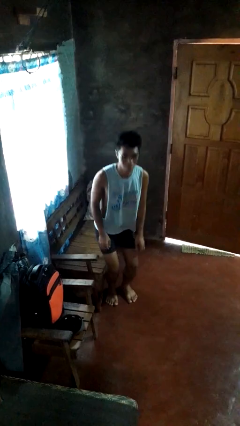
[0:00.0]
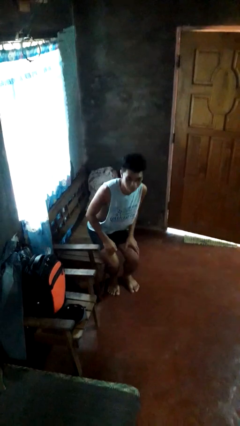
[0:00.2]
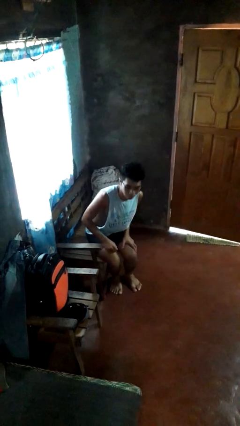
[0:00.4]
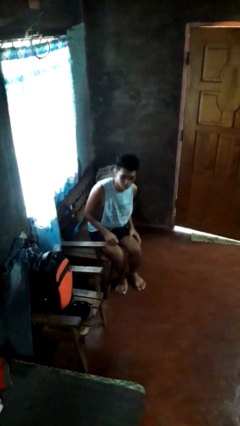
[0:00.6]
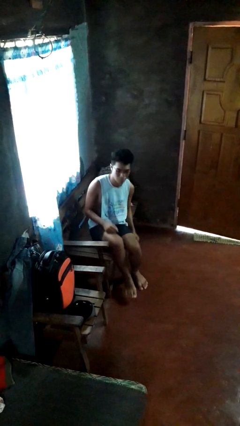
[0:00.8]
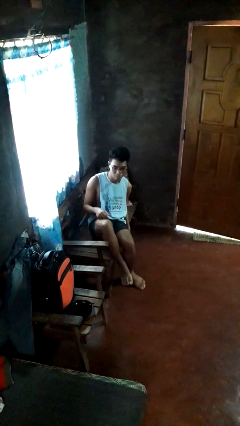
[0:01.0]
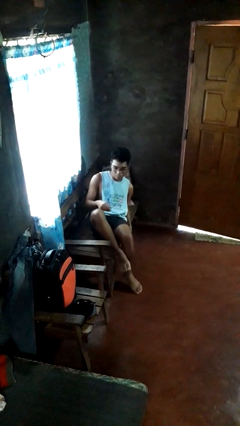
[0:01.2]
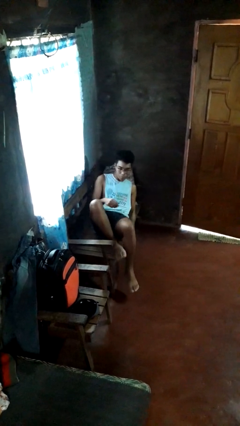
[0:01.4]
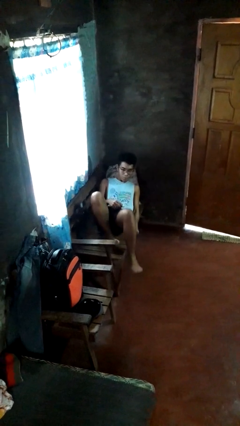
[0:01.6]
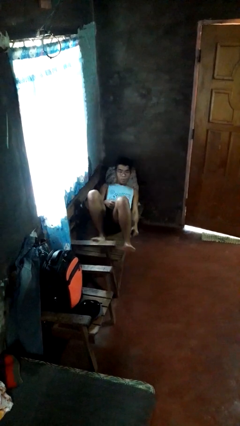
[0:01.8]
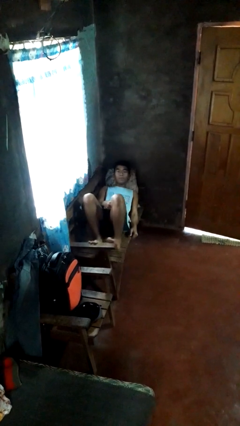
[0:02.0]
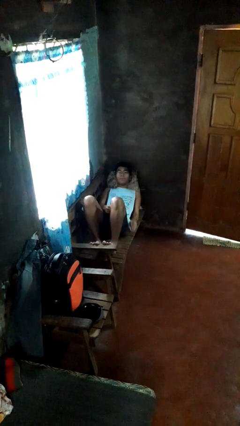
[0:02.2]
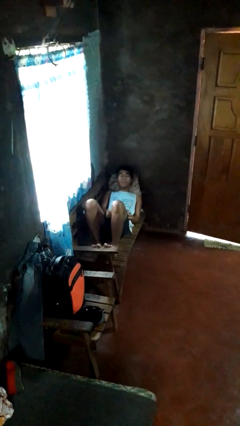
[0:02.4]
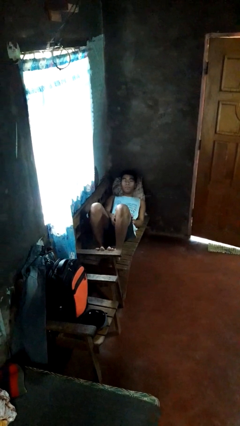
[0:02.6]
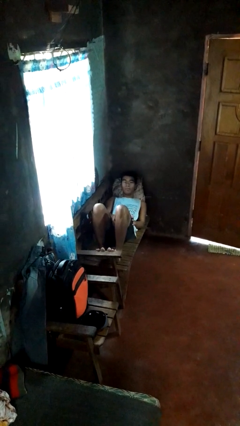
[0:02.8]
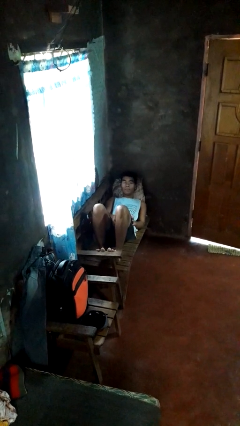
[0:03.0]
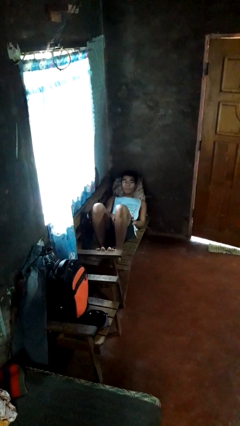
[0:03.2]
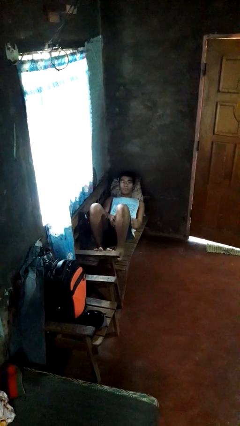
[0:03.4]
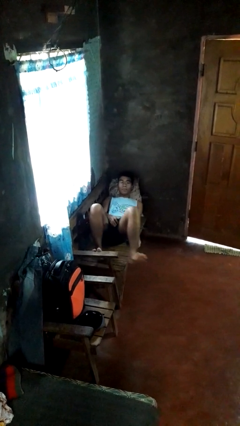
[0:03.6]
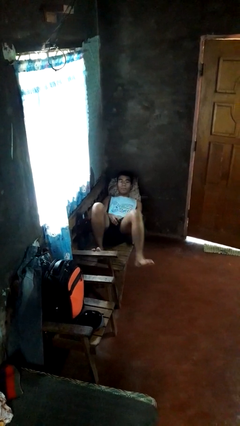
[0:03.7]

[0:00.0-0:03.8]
person lies down on couch

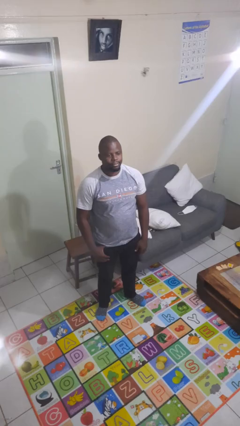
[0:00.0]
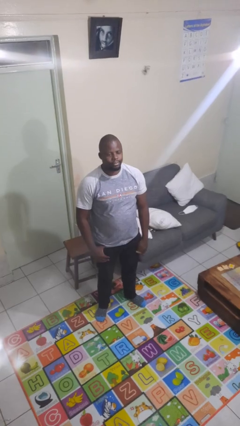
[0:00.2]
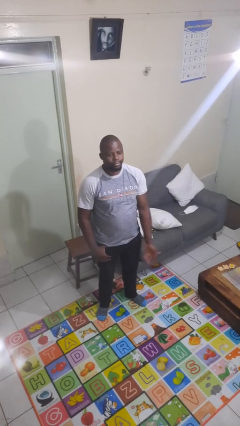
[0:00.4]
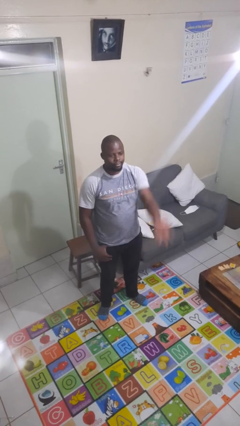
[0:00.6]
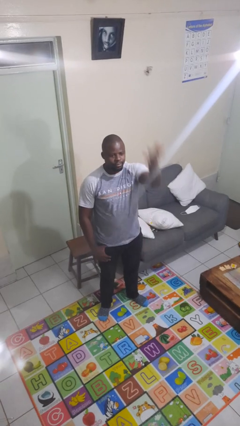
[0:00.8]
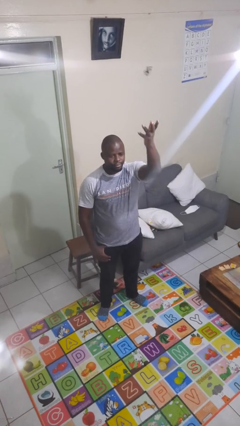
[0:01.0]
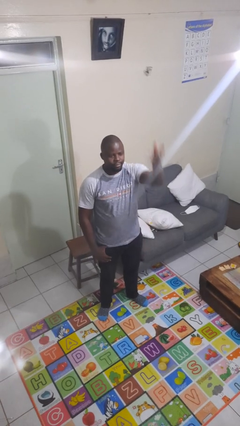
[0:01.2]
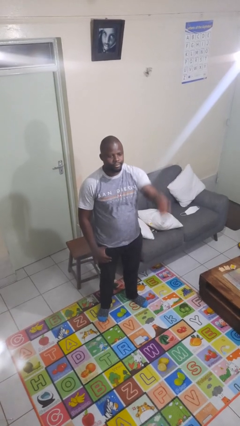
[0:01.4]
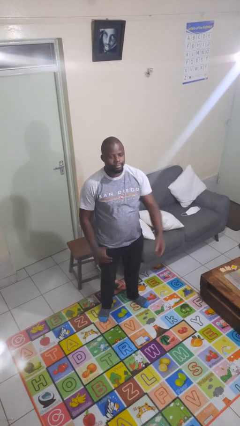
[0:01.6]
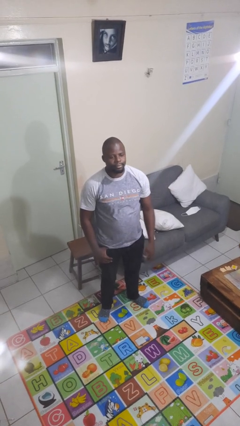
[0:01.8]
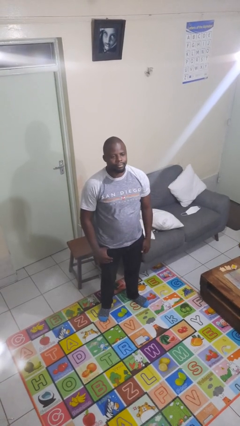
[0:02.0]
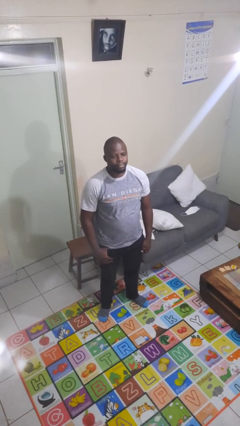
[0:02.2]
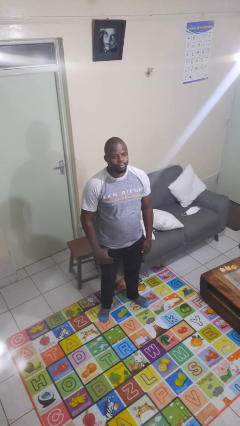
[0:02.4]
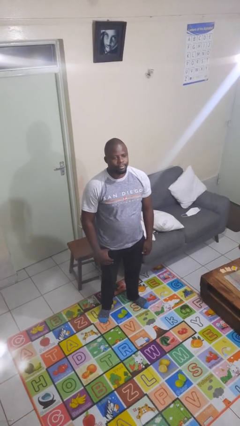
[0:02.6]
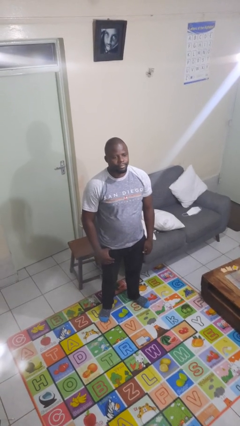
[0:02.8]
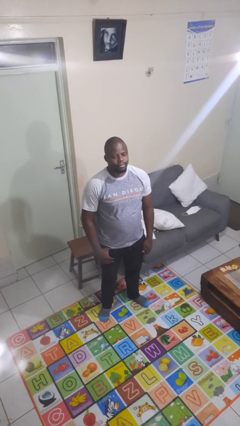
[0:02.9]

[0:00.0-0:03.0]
person gestures swipe up

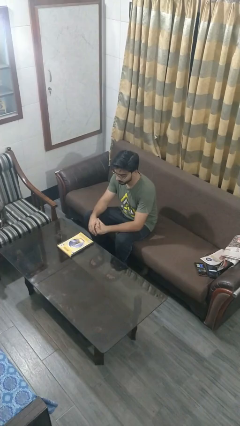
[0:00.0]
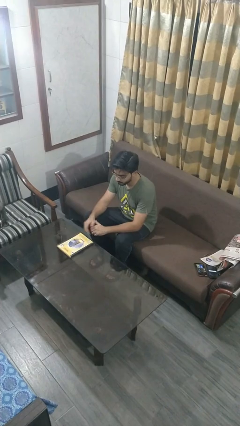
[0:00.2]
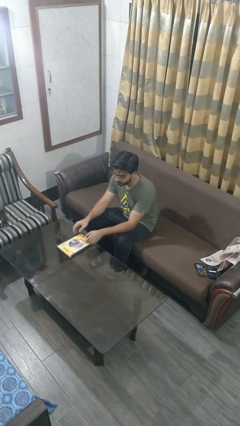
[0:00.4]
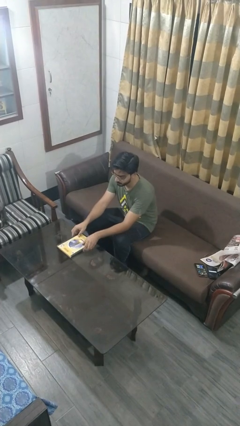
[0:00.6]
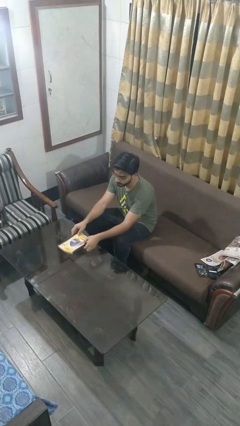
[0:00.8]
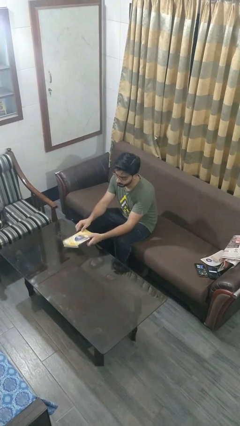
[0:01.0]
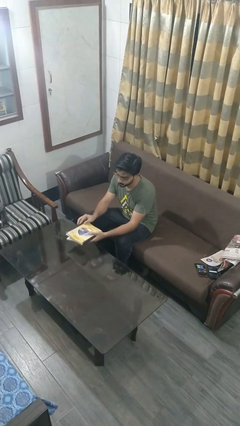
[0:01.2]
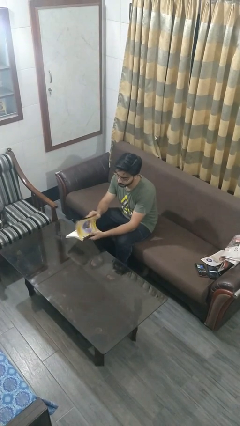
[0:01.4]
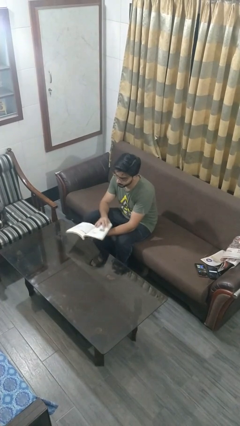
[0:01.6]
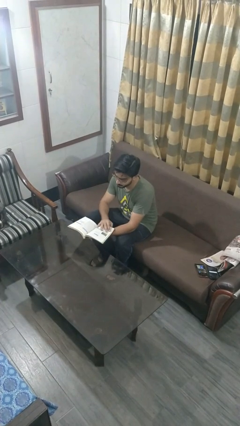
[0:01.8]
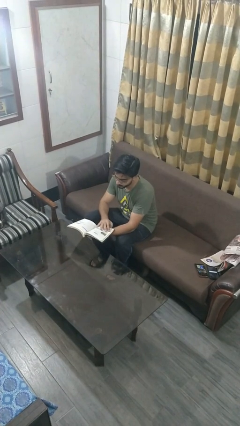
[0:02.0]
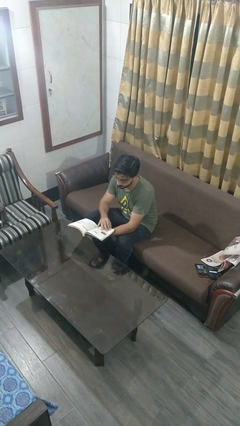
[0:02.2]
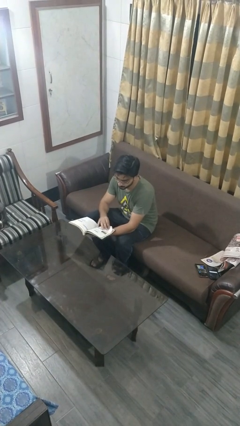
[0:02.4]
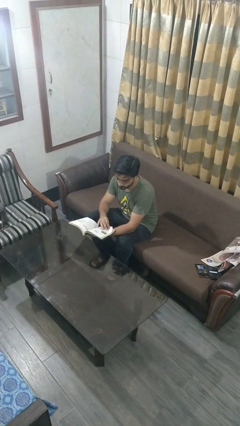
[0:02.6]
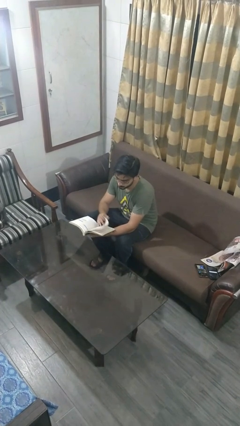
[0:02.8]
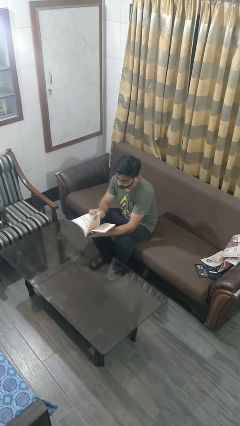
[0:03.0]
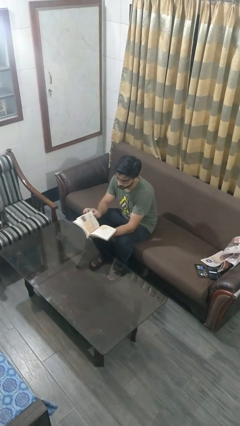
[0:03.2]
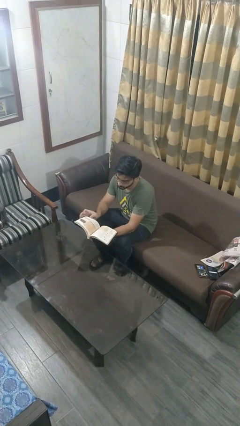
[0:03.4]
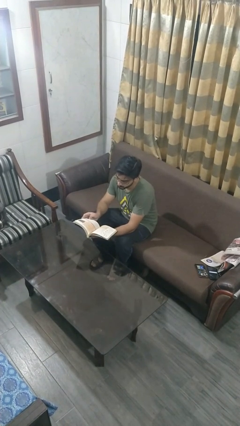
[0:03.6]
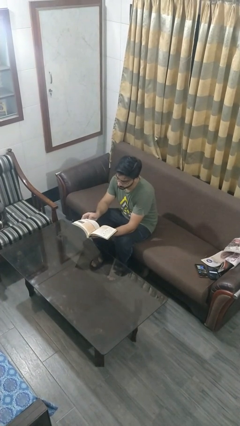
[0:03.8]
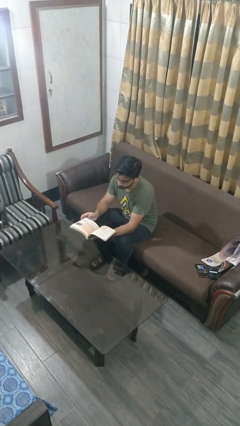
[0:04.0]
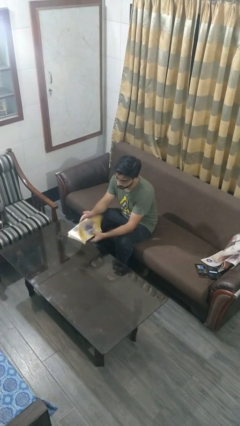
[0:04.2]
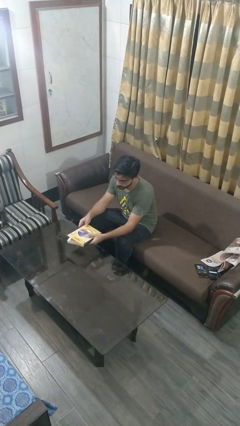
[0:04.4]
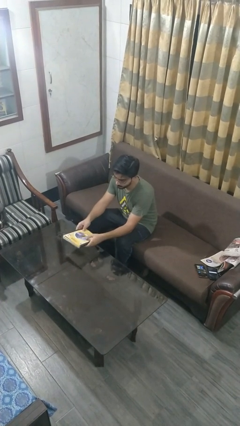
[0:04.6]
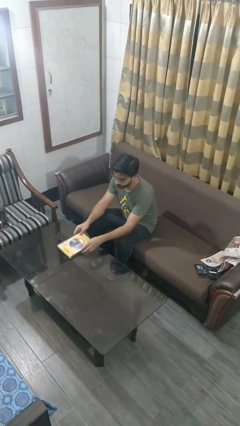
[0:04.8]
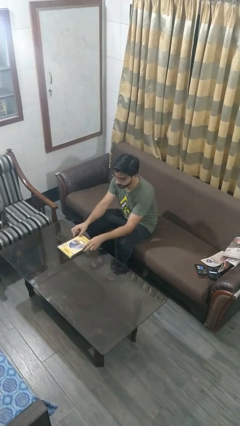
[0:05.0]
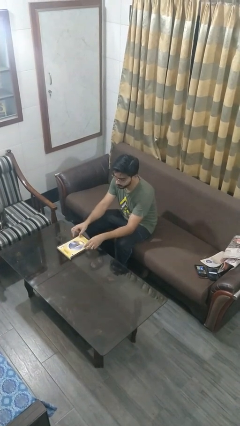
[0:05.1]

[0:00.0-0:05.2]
person reads book

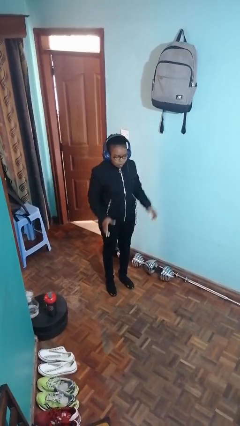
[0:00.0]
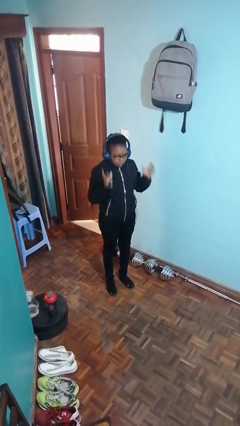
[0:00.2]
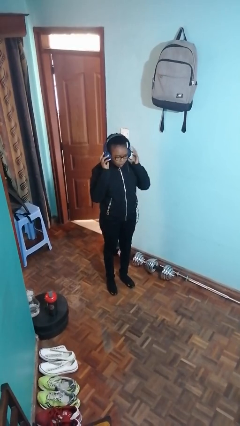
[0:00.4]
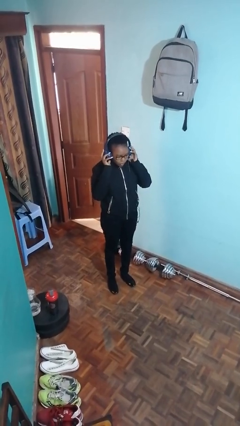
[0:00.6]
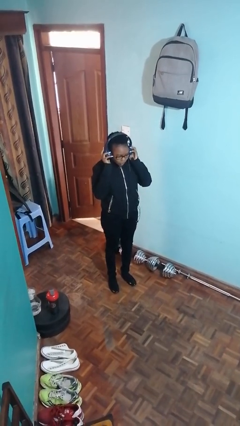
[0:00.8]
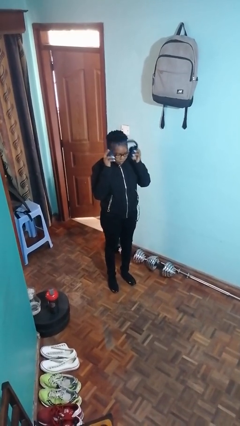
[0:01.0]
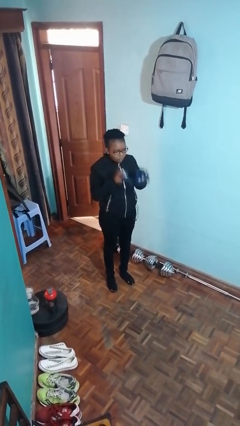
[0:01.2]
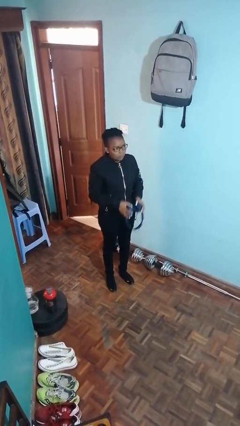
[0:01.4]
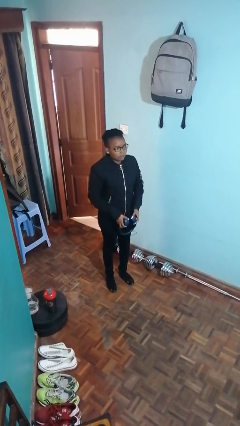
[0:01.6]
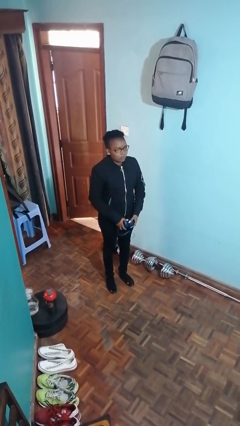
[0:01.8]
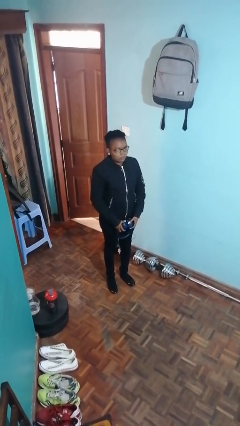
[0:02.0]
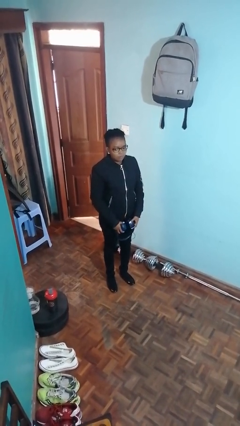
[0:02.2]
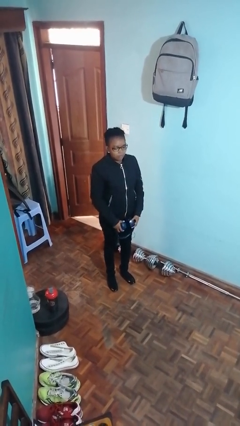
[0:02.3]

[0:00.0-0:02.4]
person takes off headphones

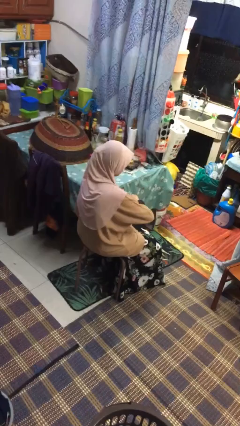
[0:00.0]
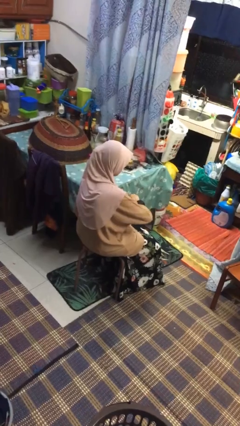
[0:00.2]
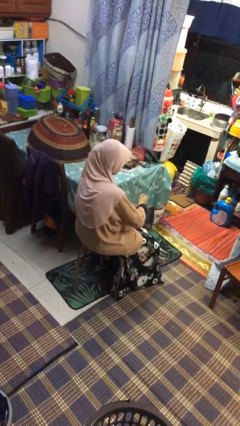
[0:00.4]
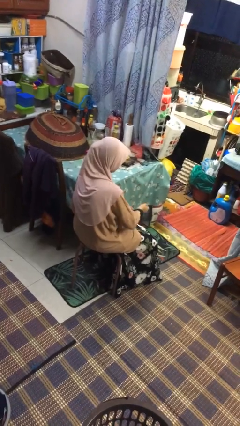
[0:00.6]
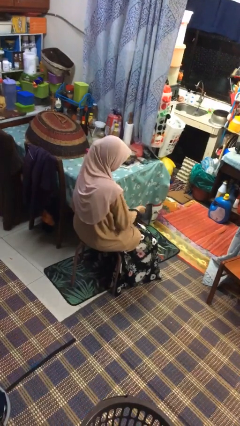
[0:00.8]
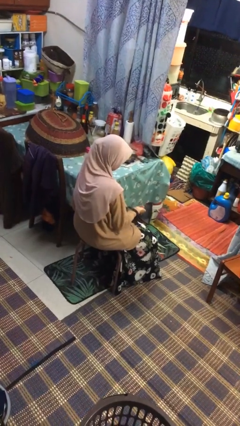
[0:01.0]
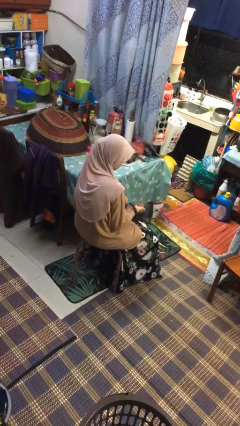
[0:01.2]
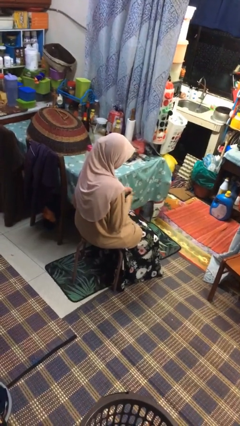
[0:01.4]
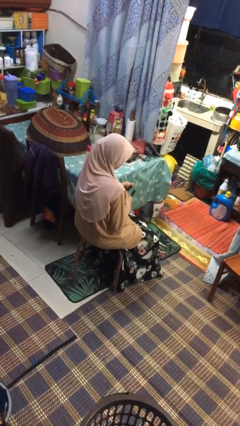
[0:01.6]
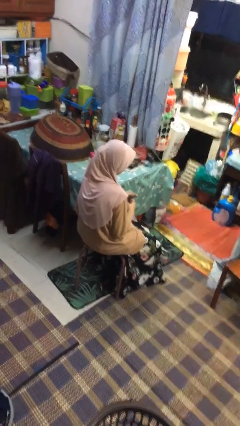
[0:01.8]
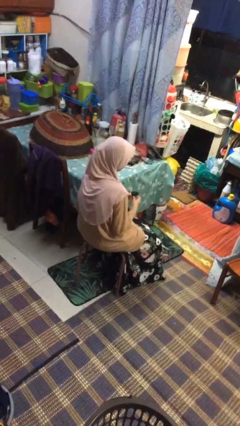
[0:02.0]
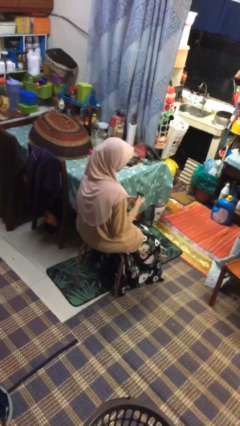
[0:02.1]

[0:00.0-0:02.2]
person takes off wristwatch

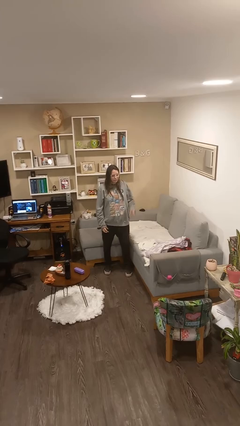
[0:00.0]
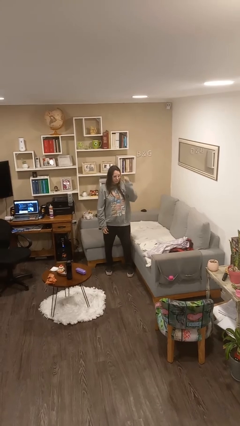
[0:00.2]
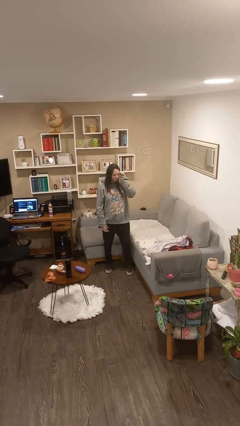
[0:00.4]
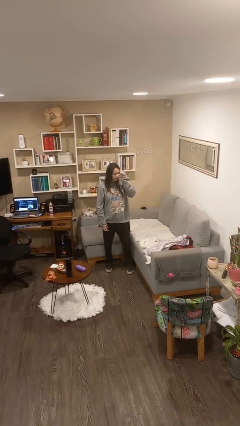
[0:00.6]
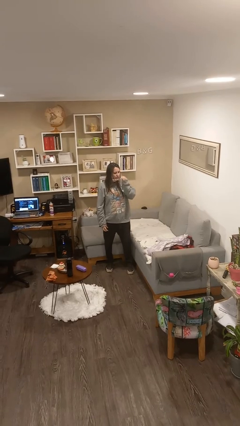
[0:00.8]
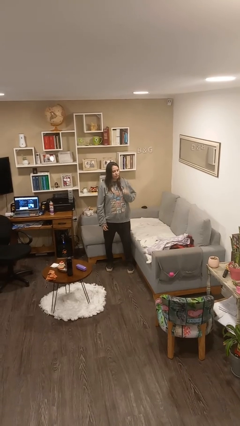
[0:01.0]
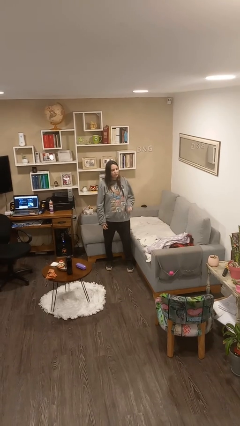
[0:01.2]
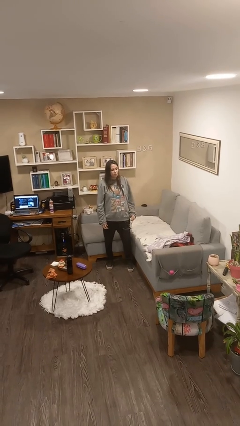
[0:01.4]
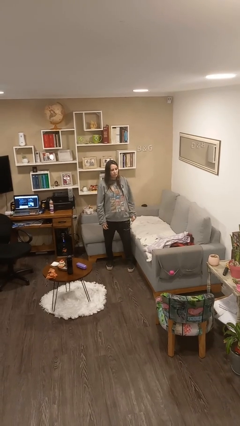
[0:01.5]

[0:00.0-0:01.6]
person takes off glasses
